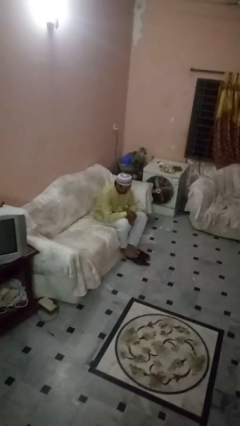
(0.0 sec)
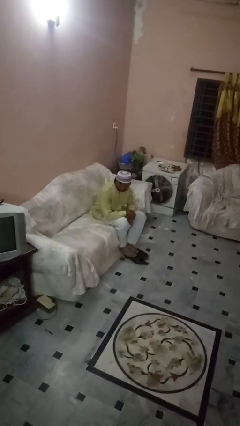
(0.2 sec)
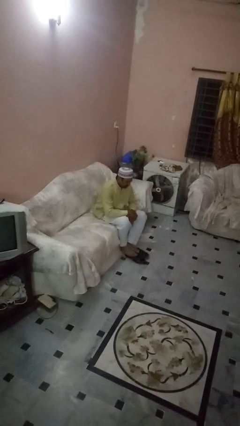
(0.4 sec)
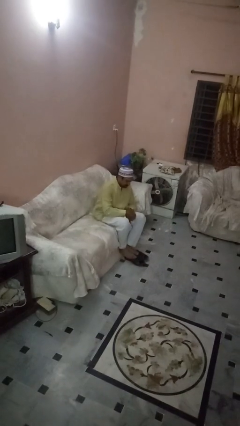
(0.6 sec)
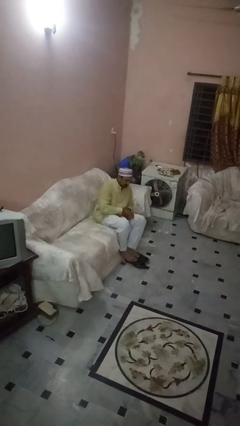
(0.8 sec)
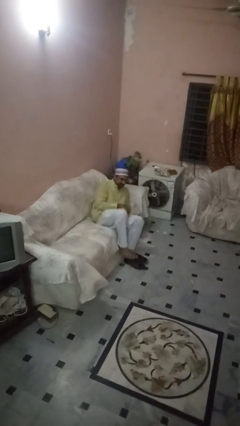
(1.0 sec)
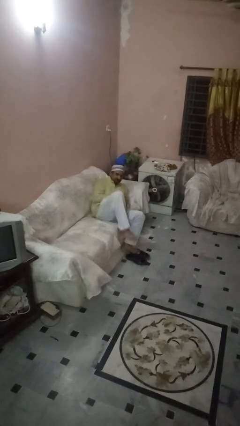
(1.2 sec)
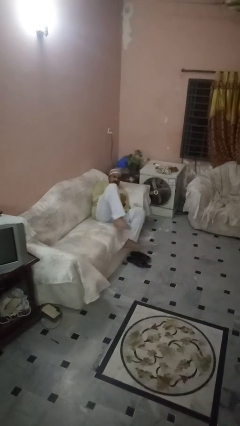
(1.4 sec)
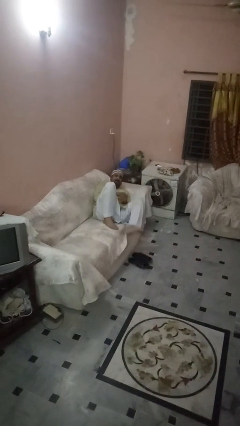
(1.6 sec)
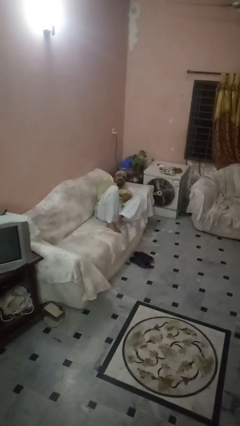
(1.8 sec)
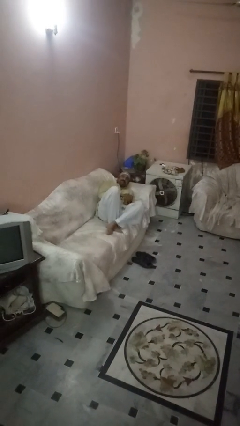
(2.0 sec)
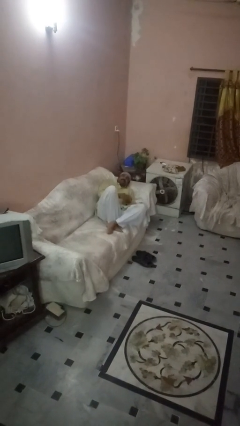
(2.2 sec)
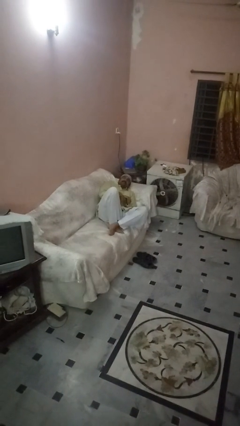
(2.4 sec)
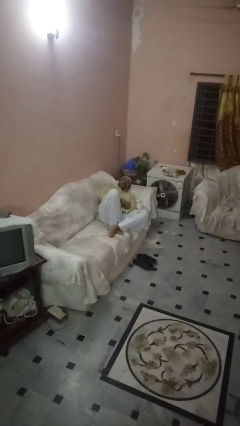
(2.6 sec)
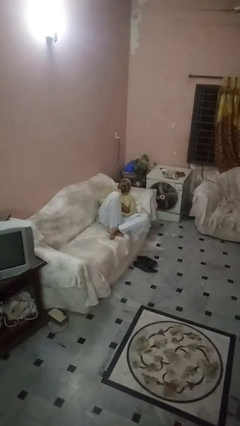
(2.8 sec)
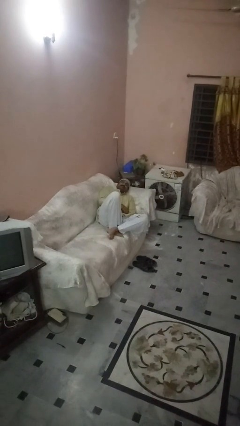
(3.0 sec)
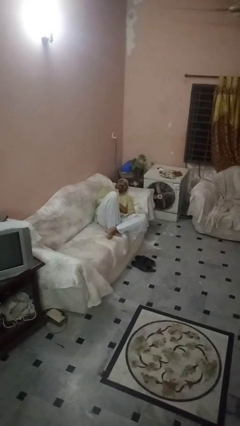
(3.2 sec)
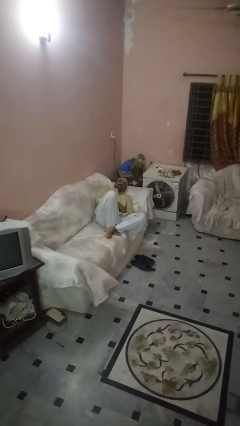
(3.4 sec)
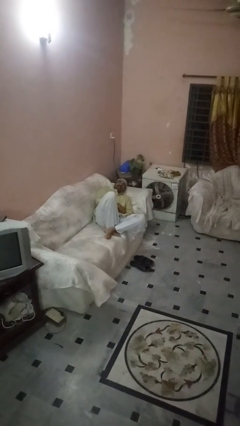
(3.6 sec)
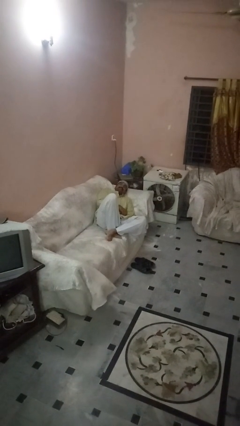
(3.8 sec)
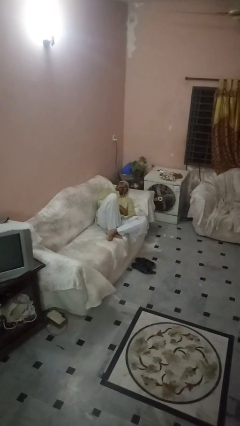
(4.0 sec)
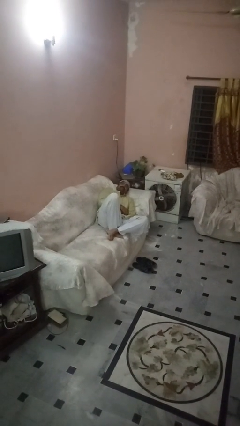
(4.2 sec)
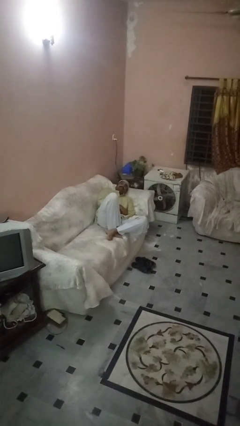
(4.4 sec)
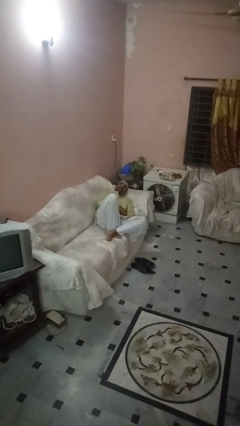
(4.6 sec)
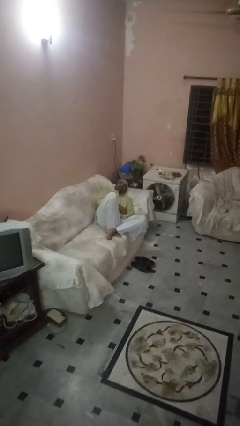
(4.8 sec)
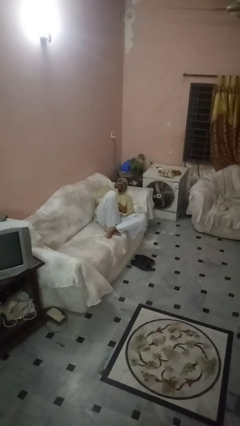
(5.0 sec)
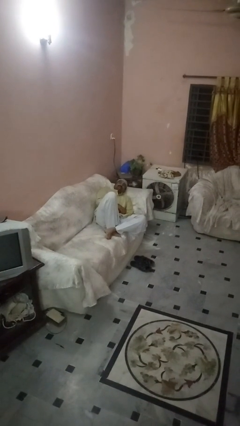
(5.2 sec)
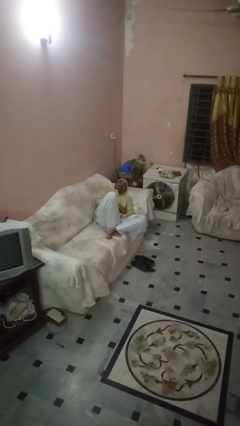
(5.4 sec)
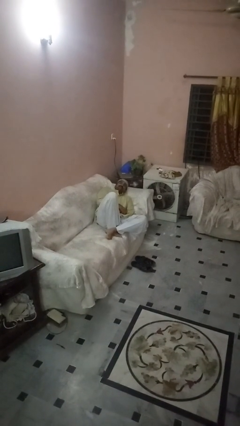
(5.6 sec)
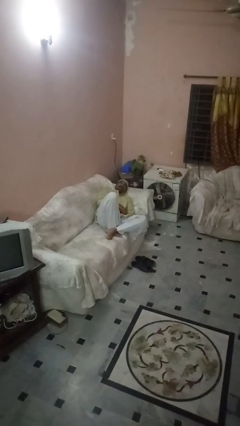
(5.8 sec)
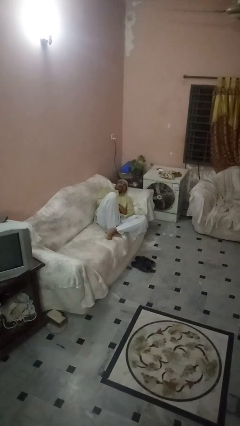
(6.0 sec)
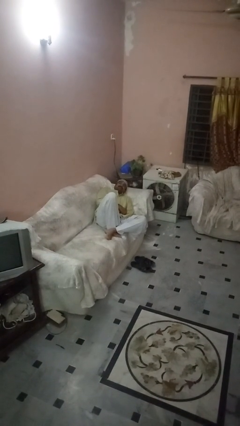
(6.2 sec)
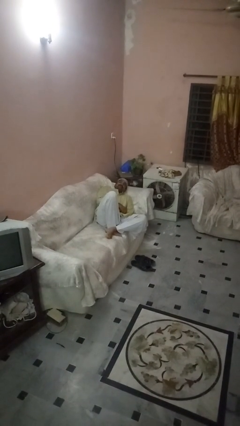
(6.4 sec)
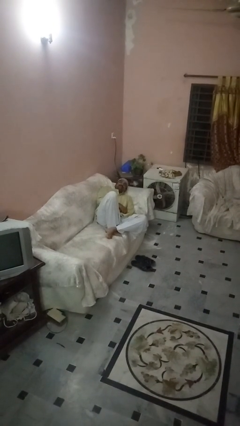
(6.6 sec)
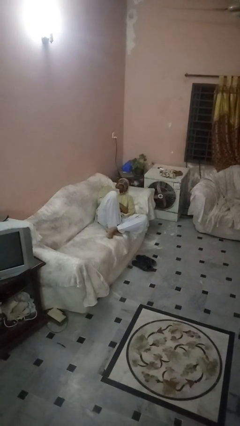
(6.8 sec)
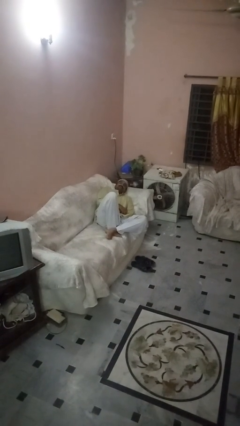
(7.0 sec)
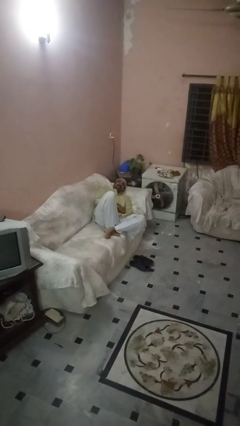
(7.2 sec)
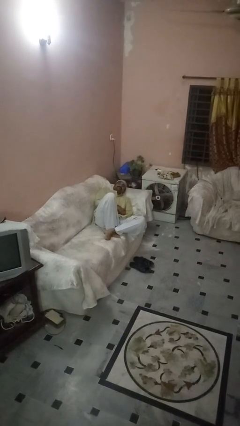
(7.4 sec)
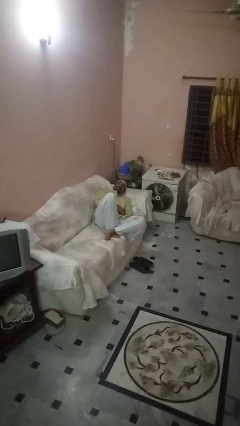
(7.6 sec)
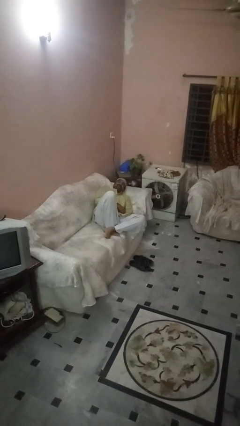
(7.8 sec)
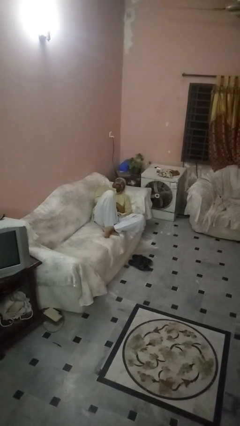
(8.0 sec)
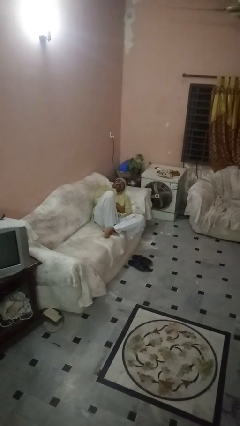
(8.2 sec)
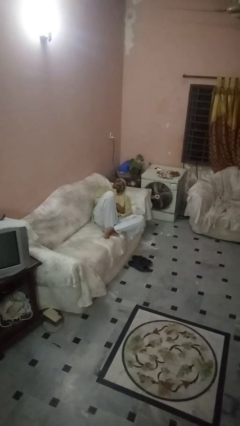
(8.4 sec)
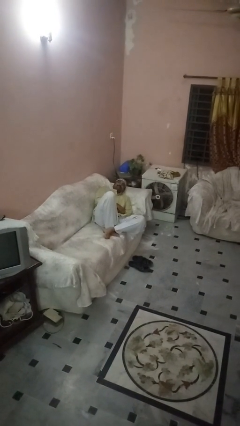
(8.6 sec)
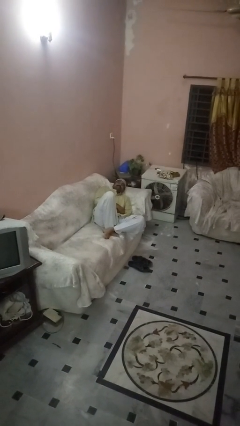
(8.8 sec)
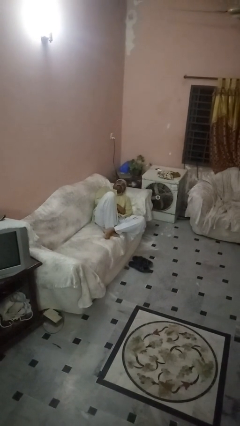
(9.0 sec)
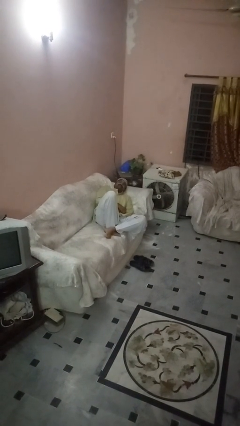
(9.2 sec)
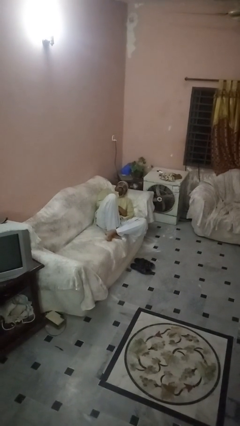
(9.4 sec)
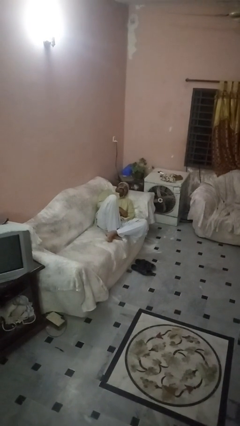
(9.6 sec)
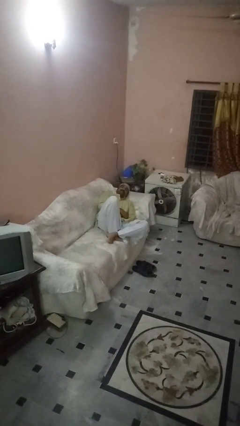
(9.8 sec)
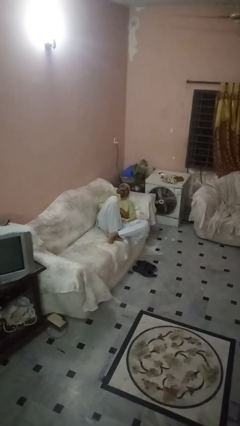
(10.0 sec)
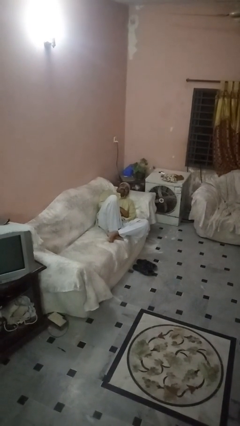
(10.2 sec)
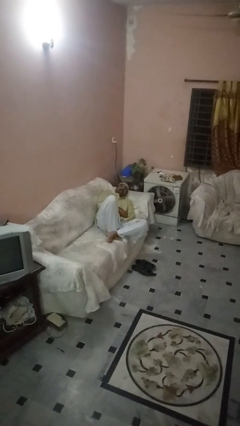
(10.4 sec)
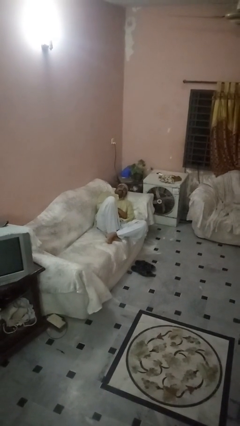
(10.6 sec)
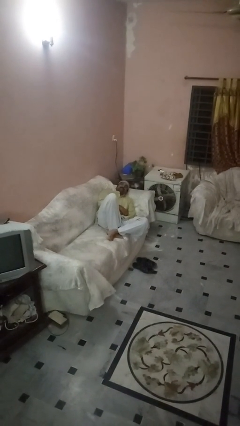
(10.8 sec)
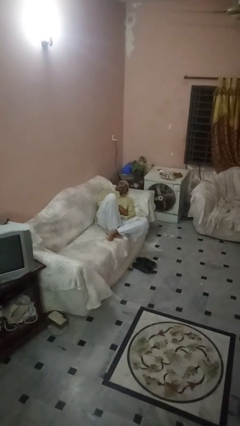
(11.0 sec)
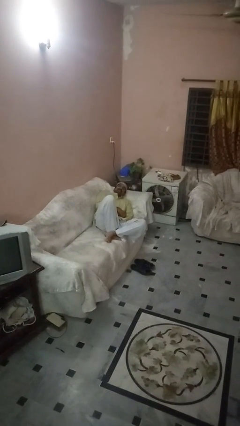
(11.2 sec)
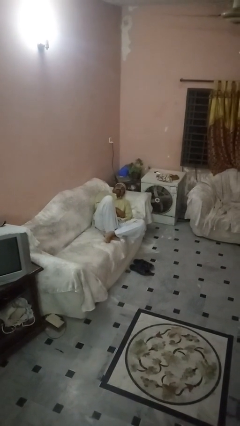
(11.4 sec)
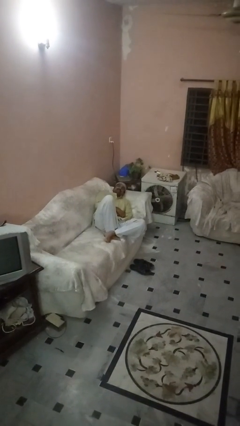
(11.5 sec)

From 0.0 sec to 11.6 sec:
person lies down on couch

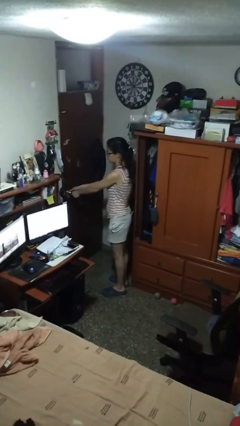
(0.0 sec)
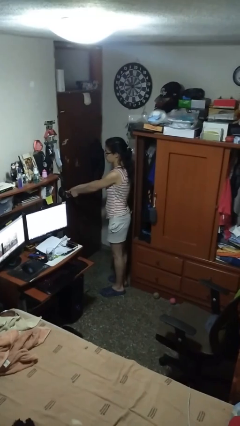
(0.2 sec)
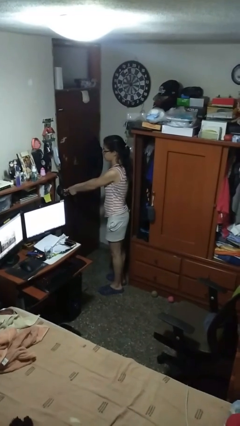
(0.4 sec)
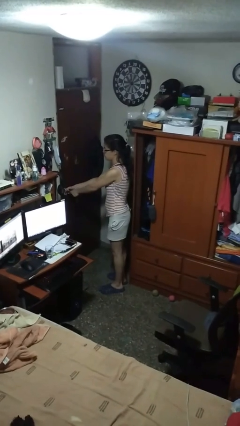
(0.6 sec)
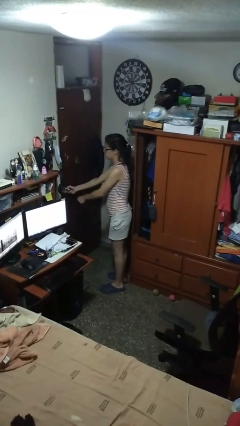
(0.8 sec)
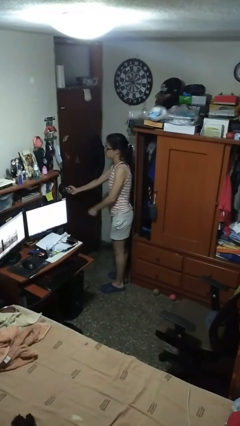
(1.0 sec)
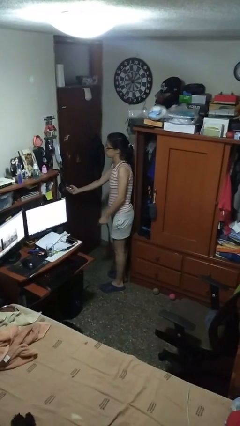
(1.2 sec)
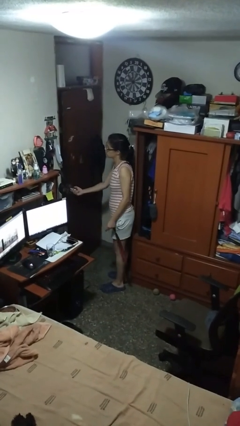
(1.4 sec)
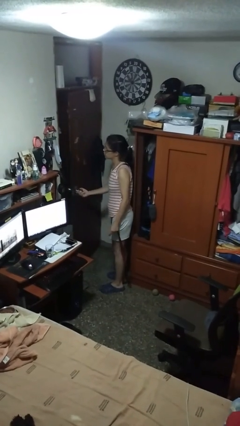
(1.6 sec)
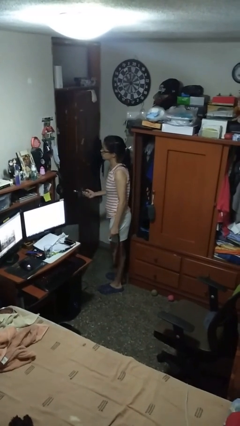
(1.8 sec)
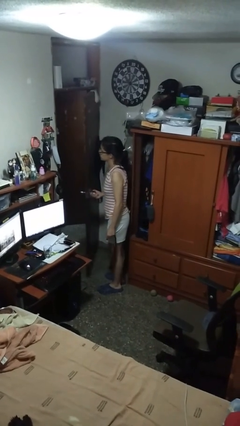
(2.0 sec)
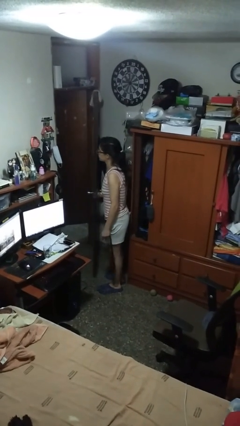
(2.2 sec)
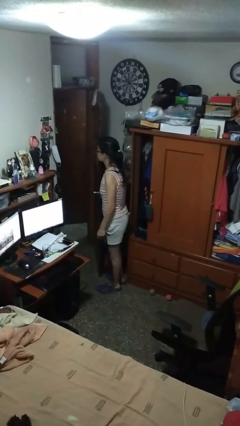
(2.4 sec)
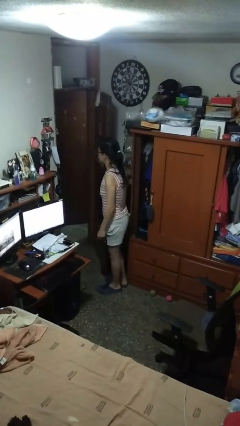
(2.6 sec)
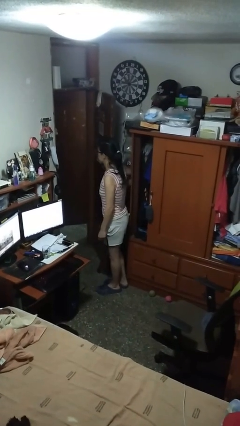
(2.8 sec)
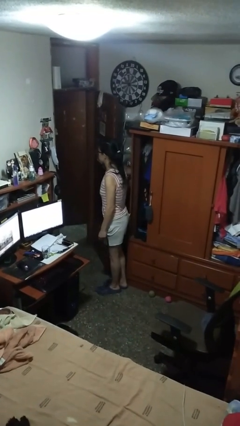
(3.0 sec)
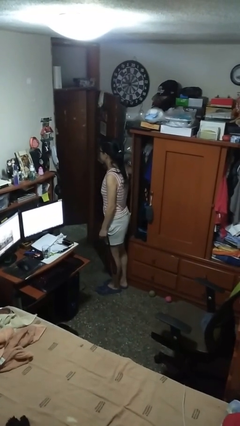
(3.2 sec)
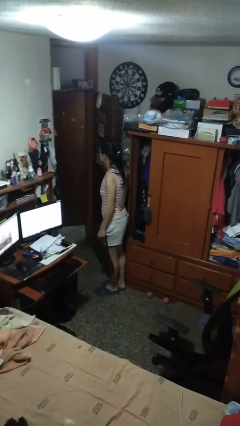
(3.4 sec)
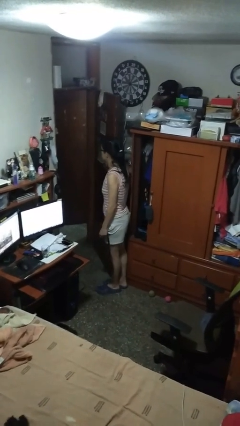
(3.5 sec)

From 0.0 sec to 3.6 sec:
person opens facility door

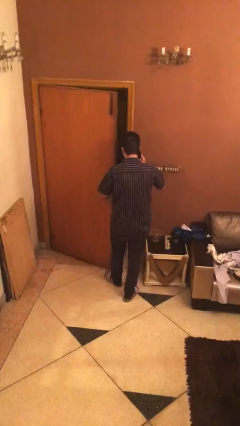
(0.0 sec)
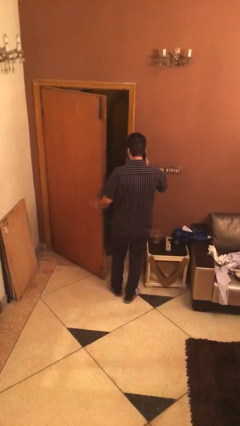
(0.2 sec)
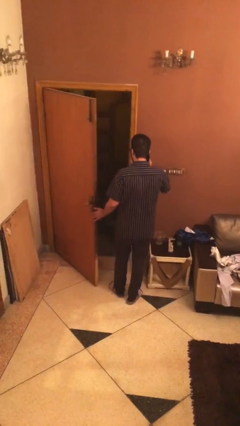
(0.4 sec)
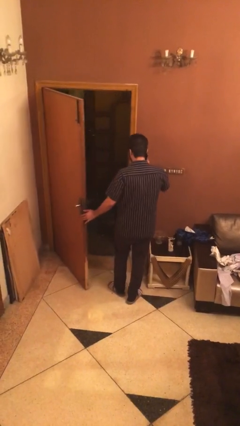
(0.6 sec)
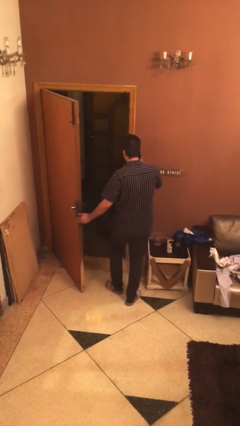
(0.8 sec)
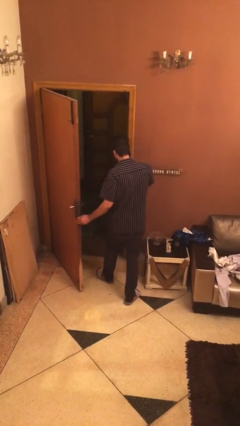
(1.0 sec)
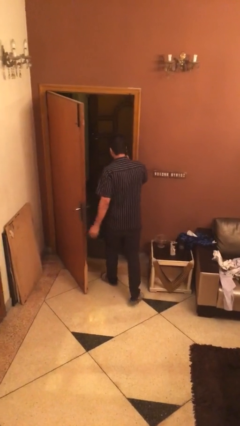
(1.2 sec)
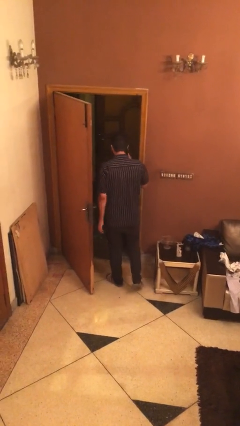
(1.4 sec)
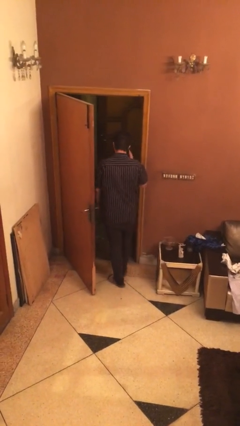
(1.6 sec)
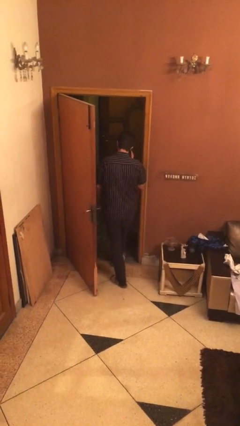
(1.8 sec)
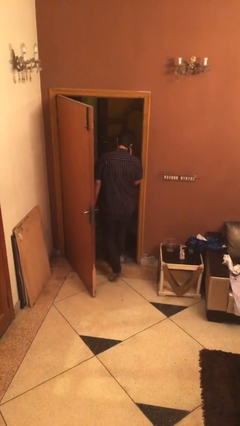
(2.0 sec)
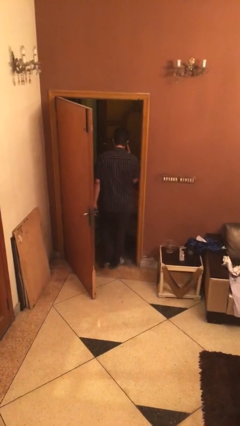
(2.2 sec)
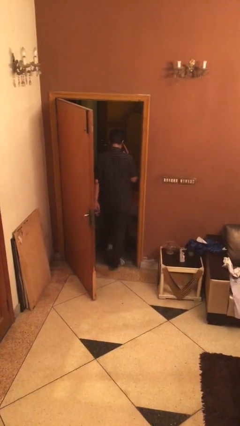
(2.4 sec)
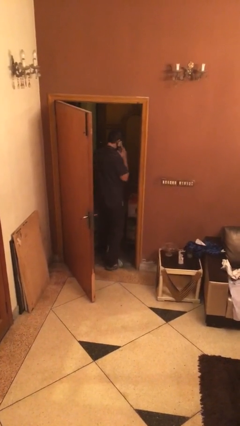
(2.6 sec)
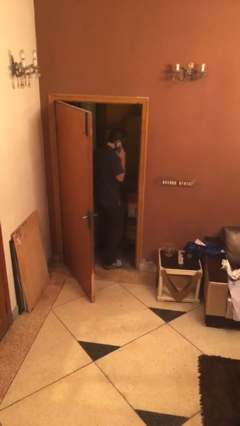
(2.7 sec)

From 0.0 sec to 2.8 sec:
person exits scene through structure
